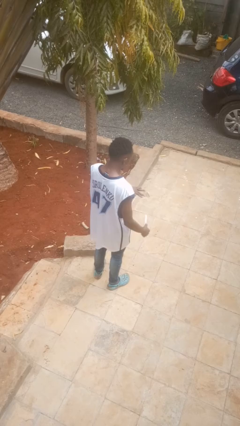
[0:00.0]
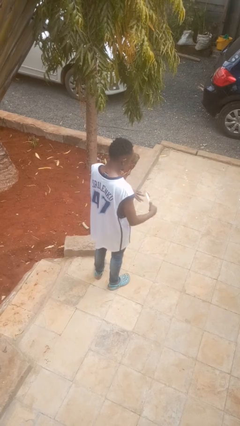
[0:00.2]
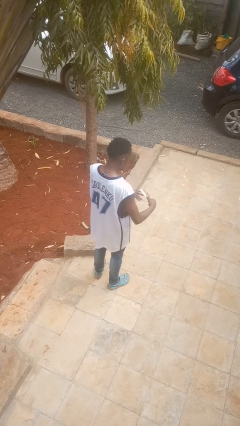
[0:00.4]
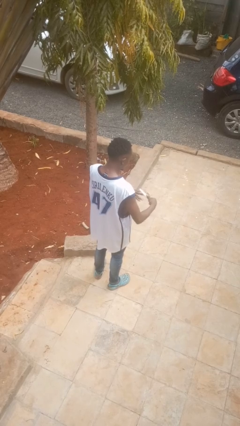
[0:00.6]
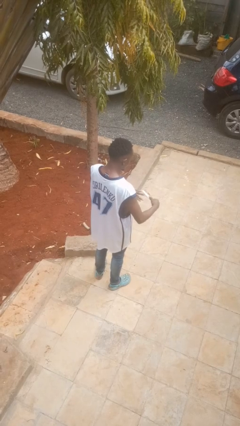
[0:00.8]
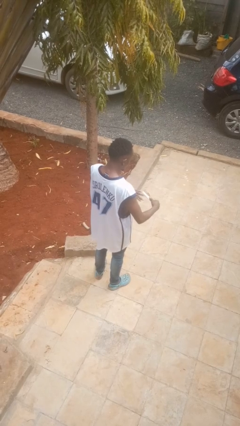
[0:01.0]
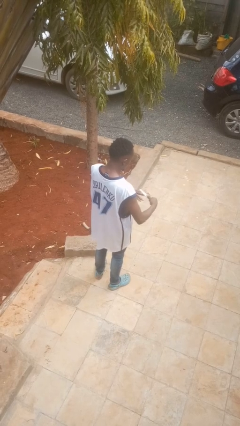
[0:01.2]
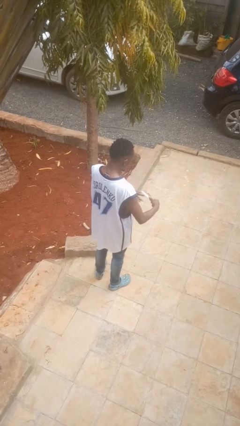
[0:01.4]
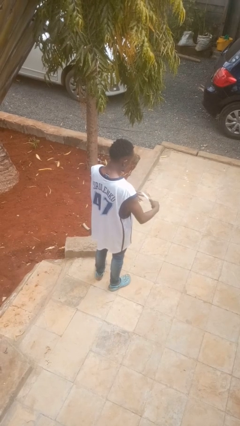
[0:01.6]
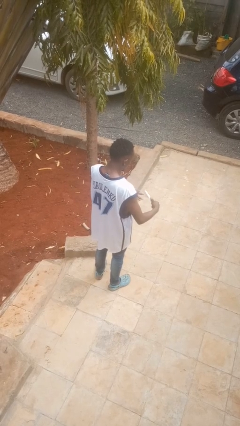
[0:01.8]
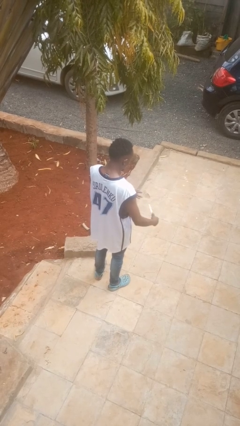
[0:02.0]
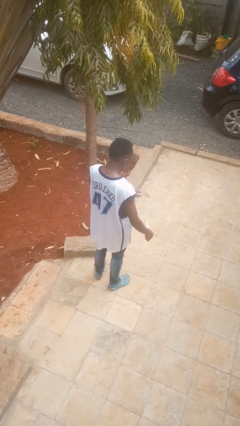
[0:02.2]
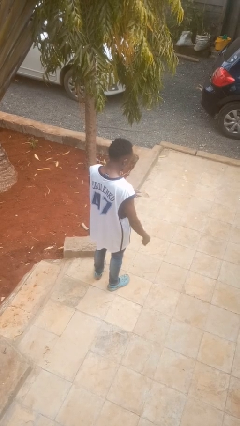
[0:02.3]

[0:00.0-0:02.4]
person files fingernails

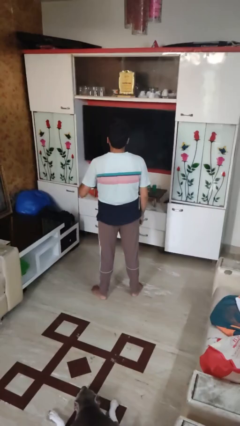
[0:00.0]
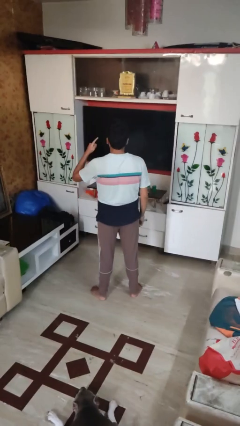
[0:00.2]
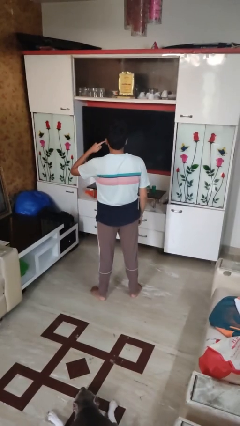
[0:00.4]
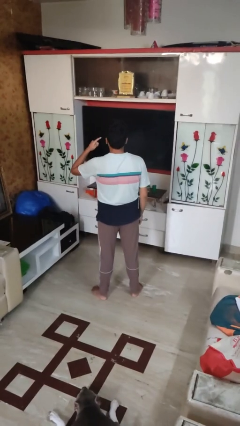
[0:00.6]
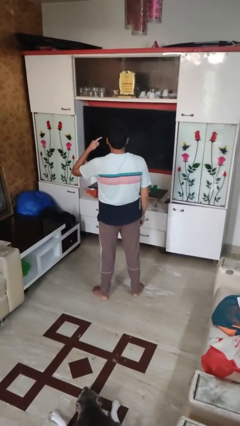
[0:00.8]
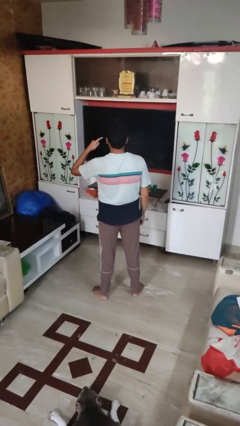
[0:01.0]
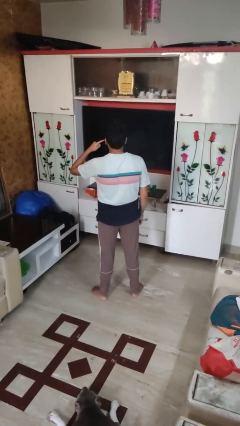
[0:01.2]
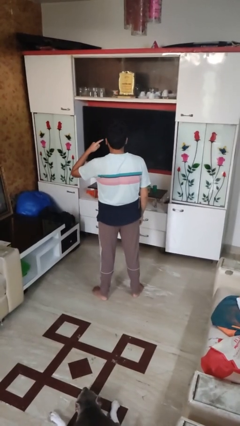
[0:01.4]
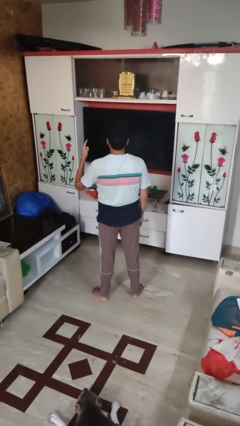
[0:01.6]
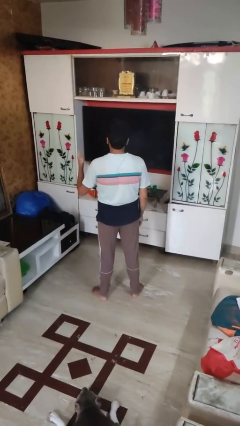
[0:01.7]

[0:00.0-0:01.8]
person gestures listen closely

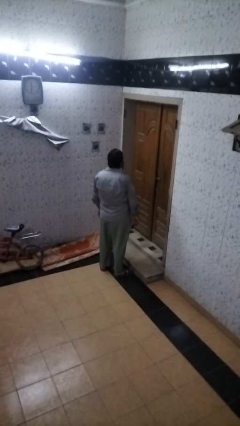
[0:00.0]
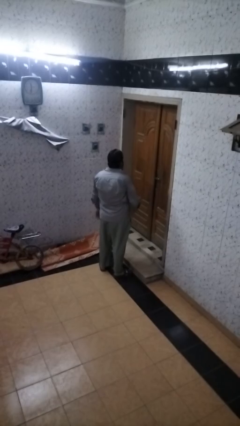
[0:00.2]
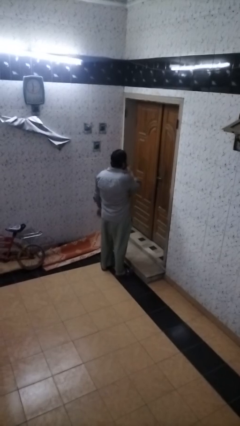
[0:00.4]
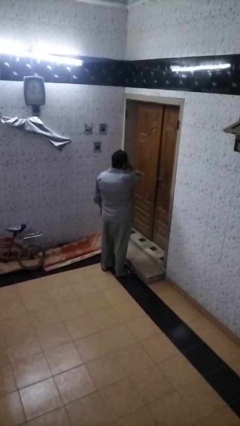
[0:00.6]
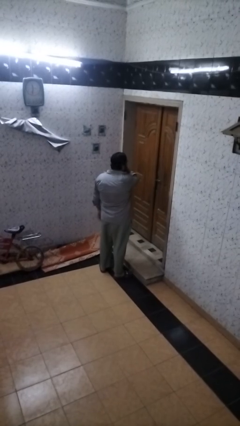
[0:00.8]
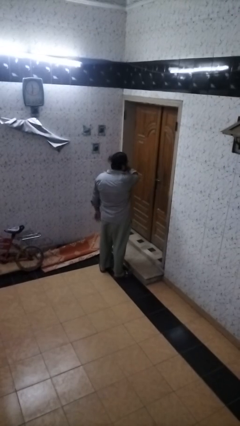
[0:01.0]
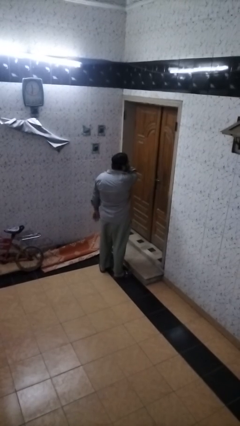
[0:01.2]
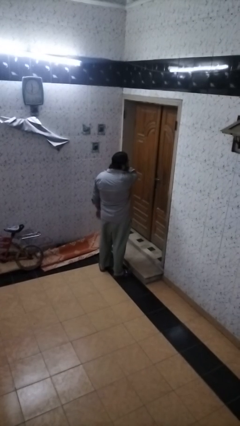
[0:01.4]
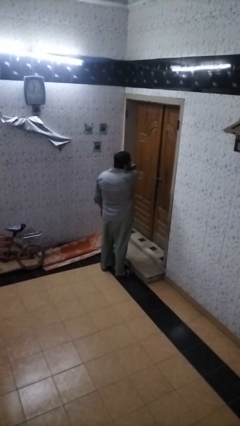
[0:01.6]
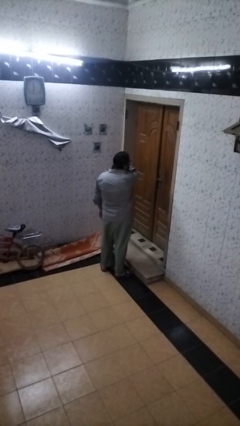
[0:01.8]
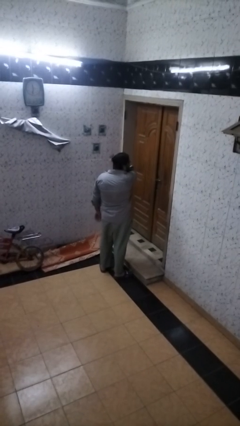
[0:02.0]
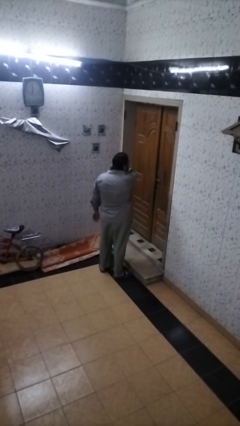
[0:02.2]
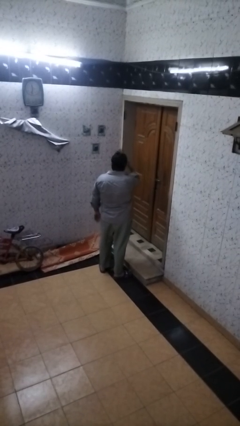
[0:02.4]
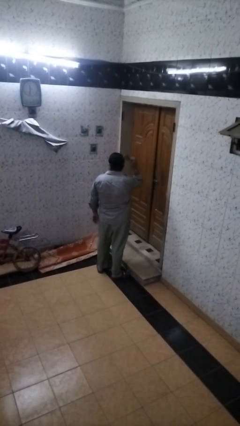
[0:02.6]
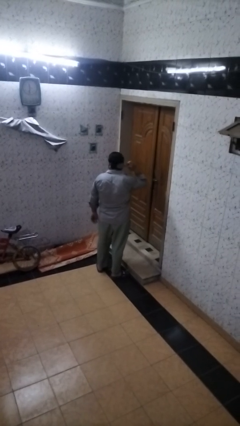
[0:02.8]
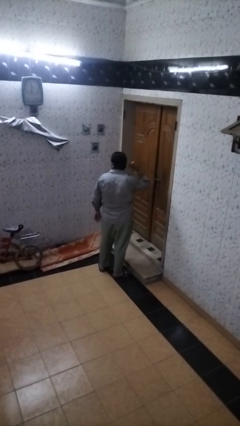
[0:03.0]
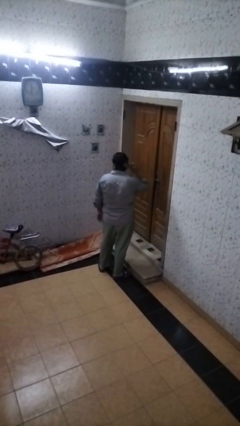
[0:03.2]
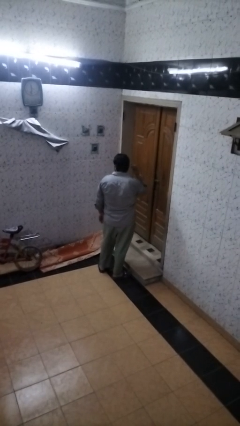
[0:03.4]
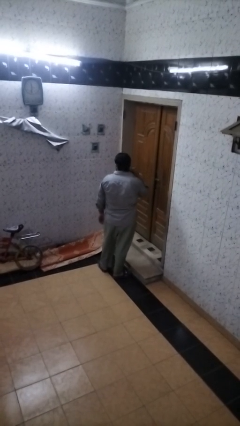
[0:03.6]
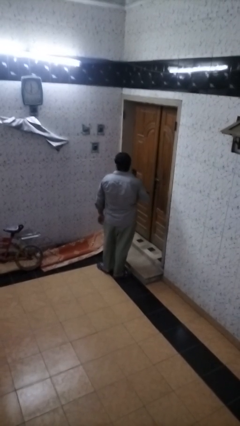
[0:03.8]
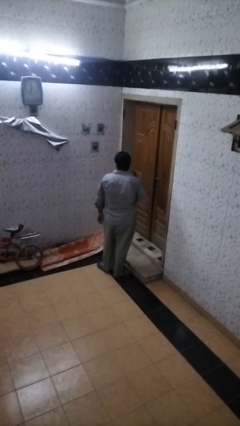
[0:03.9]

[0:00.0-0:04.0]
person brushes hair

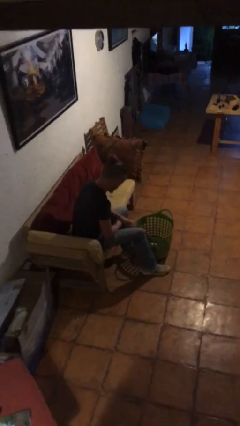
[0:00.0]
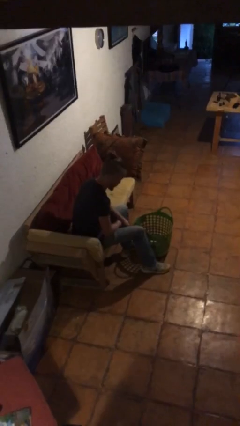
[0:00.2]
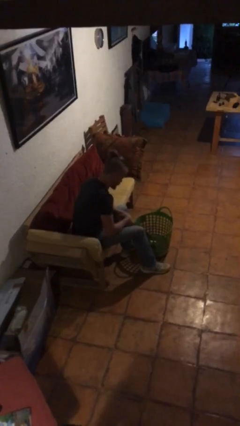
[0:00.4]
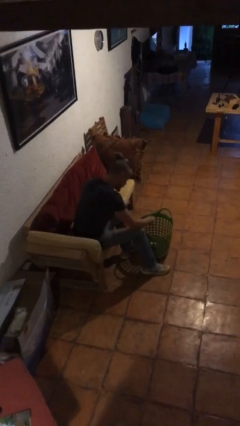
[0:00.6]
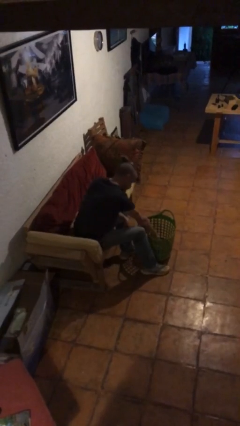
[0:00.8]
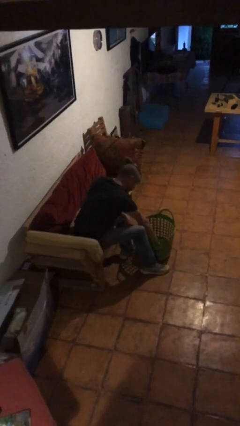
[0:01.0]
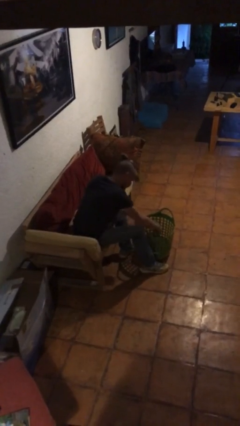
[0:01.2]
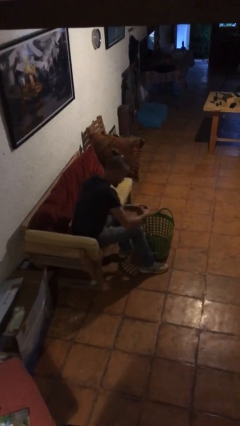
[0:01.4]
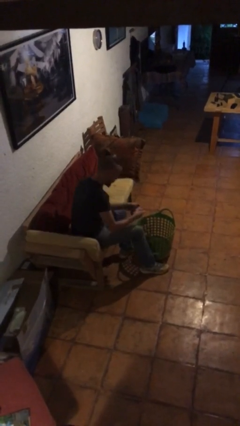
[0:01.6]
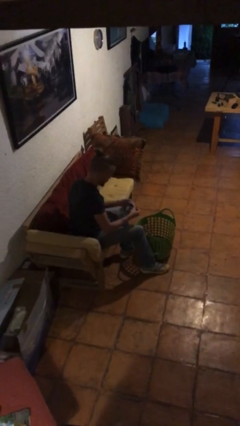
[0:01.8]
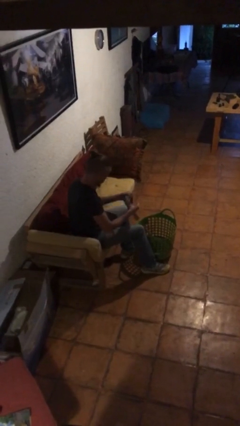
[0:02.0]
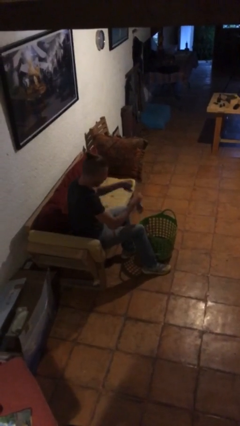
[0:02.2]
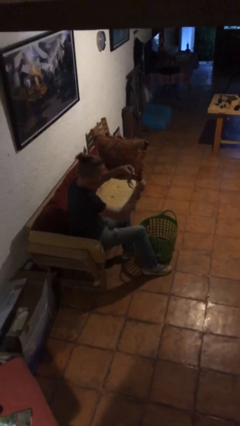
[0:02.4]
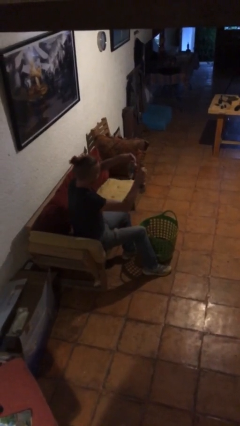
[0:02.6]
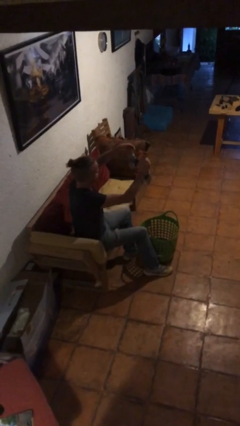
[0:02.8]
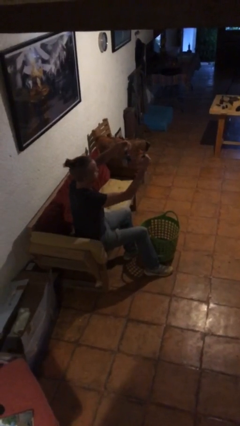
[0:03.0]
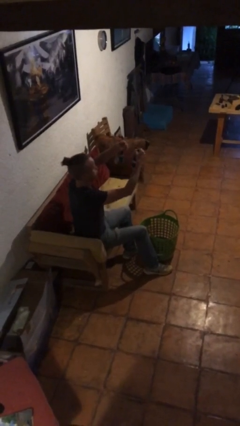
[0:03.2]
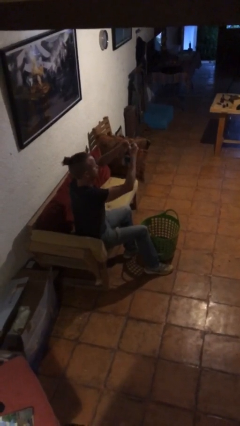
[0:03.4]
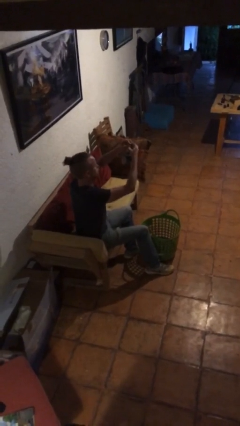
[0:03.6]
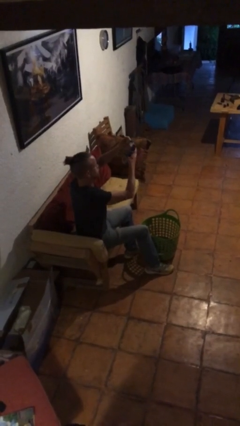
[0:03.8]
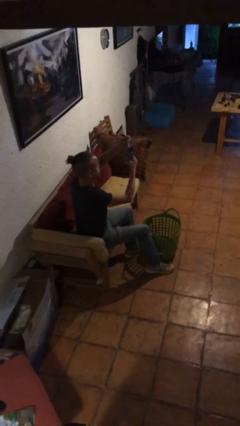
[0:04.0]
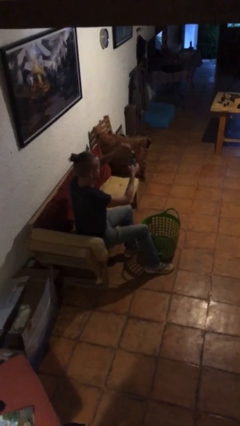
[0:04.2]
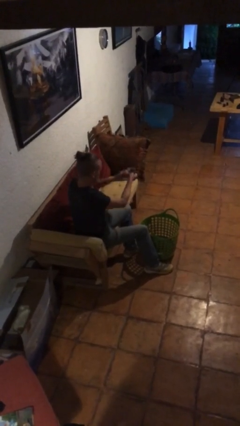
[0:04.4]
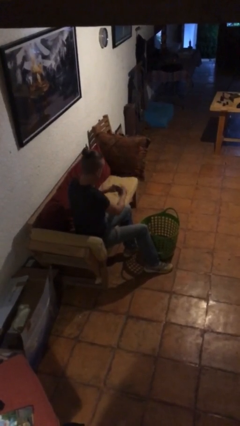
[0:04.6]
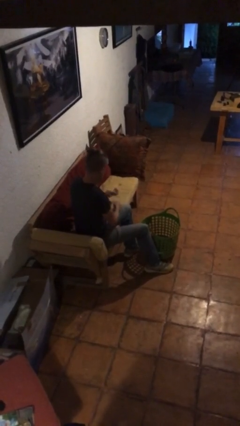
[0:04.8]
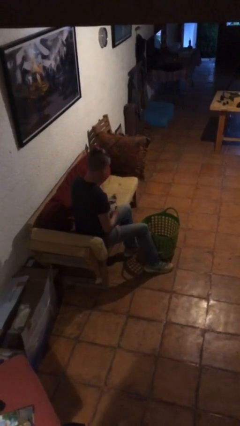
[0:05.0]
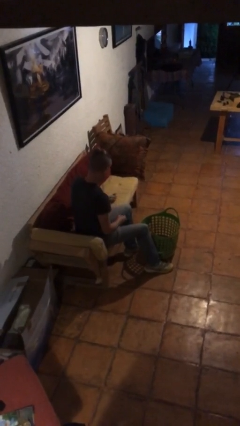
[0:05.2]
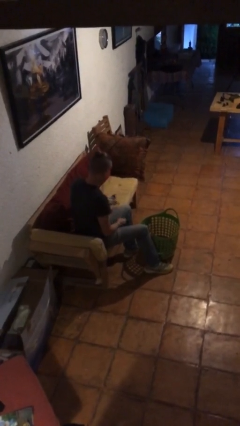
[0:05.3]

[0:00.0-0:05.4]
person folds socks

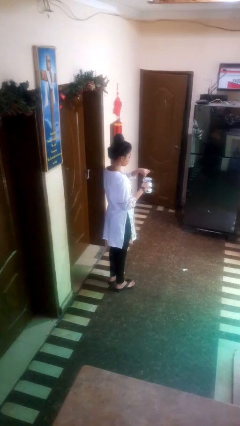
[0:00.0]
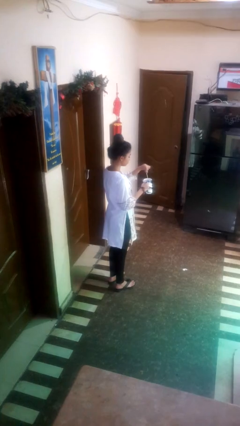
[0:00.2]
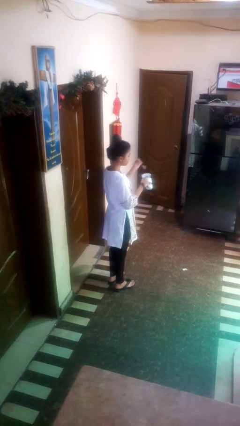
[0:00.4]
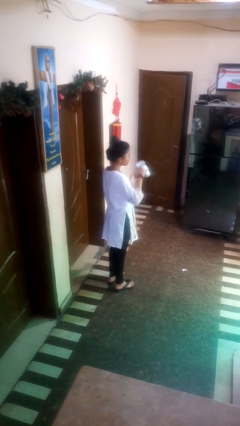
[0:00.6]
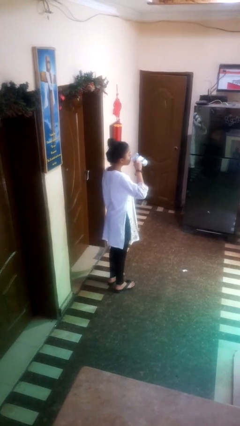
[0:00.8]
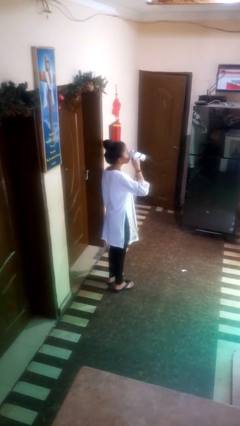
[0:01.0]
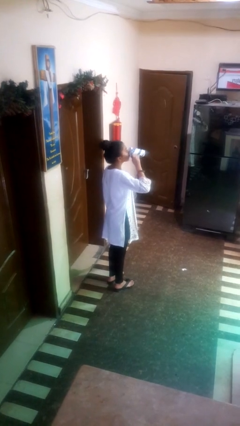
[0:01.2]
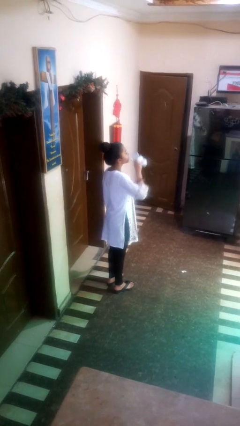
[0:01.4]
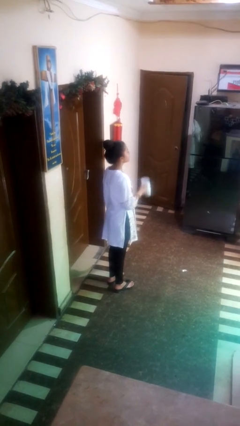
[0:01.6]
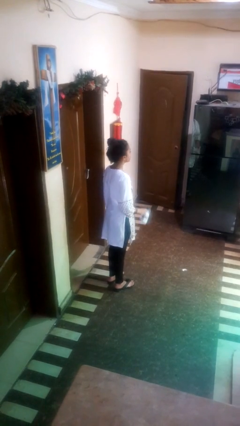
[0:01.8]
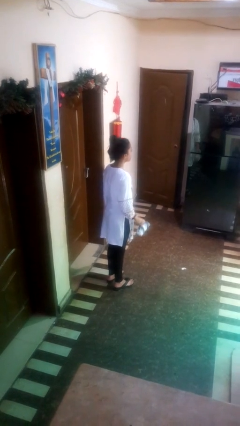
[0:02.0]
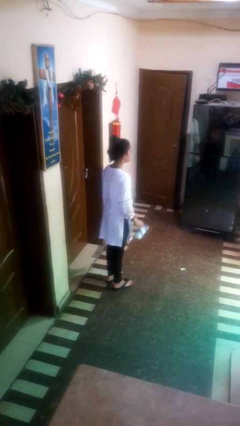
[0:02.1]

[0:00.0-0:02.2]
person drinks from mug

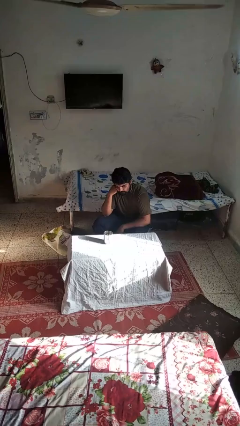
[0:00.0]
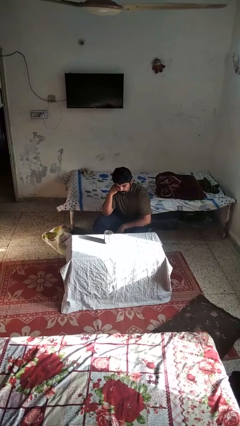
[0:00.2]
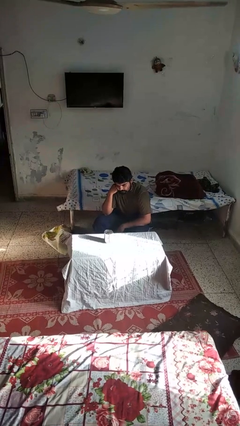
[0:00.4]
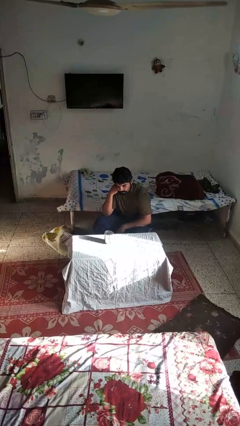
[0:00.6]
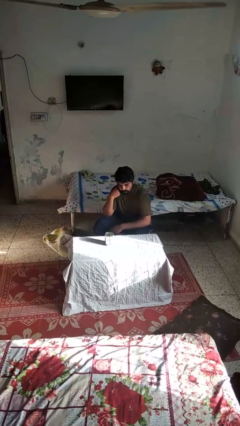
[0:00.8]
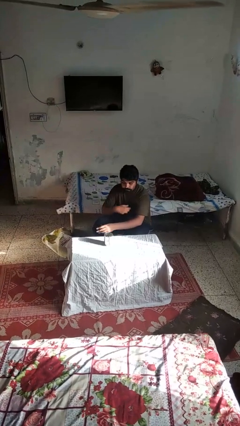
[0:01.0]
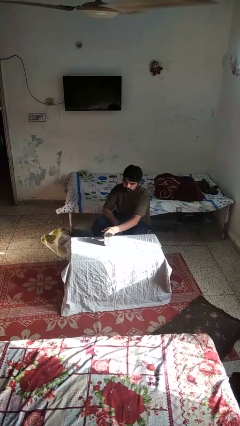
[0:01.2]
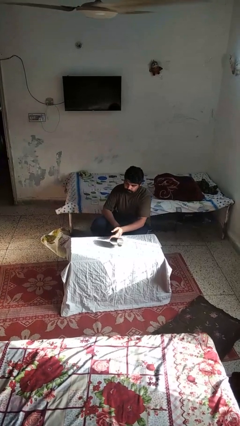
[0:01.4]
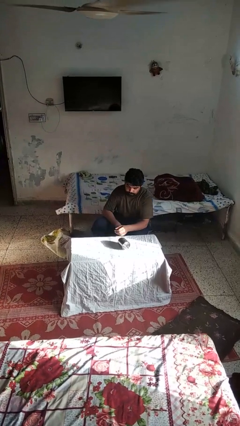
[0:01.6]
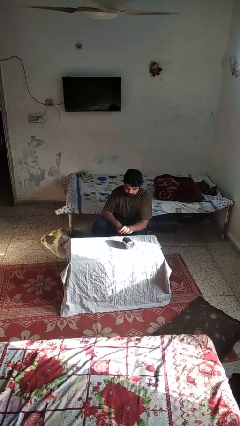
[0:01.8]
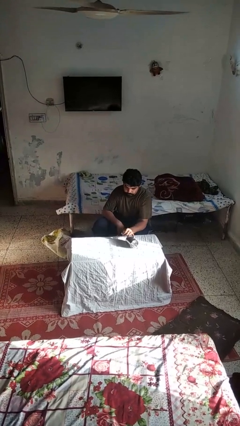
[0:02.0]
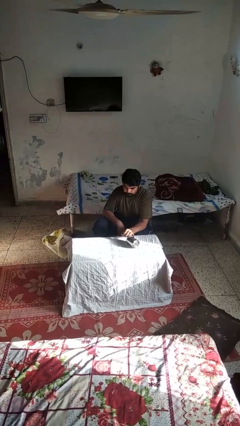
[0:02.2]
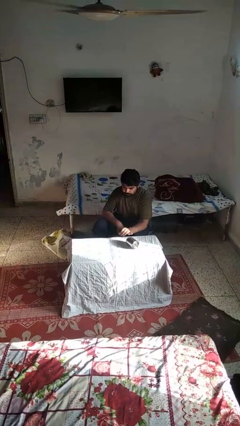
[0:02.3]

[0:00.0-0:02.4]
person knocks over glass
